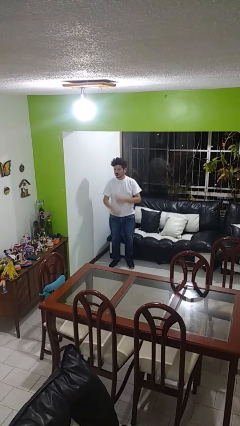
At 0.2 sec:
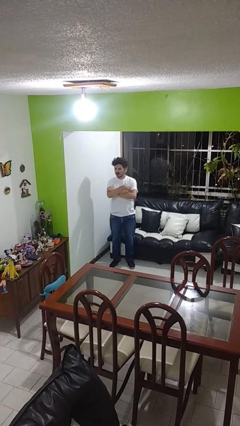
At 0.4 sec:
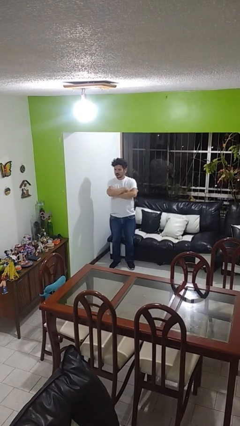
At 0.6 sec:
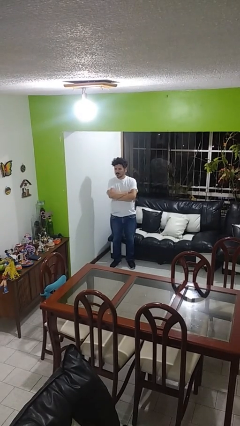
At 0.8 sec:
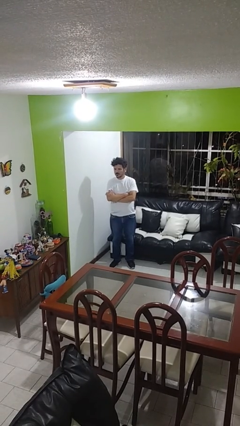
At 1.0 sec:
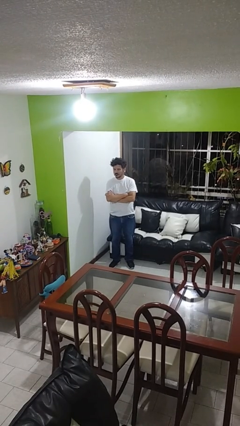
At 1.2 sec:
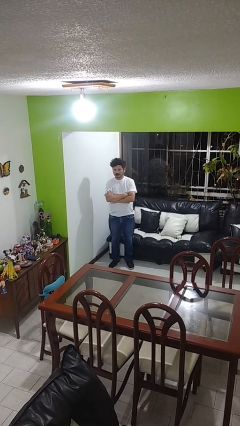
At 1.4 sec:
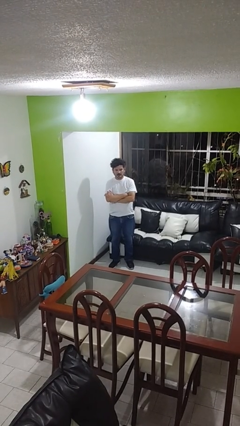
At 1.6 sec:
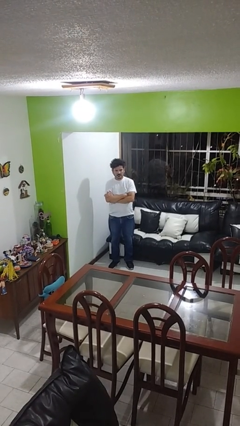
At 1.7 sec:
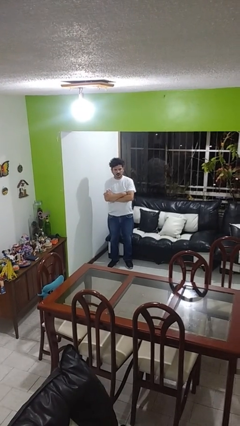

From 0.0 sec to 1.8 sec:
person crosses arms

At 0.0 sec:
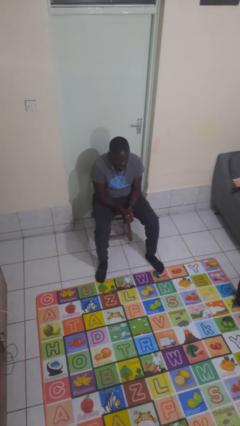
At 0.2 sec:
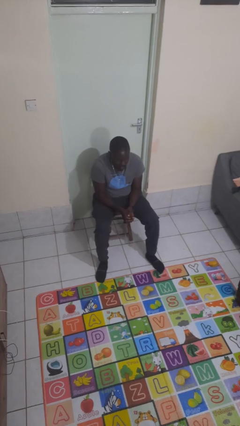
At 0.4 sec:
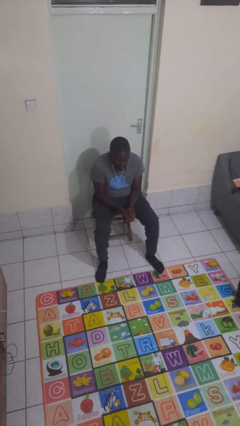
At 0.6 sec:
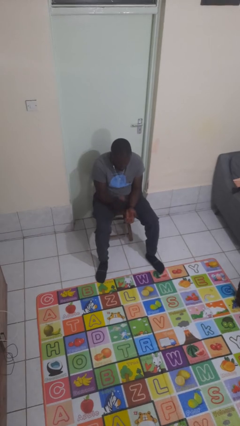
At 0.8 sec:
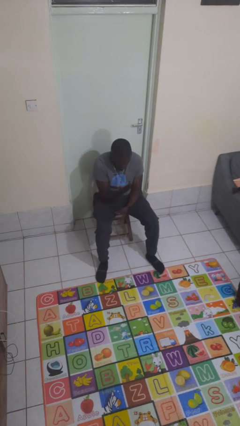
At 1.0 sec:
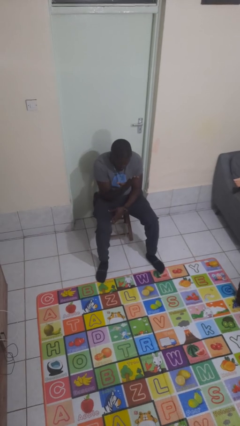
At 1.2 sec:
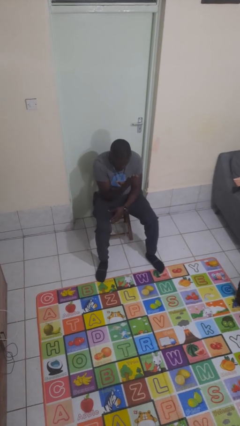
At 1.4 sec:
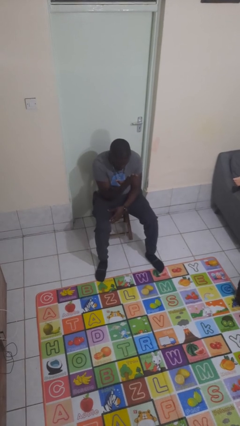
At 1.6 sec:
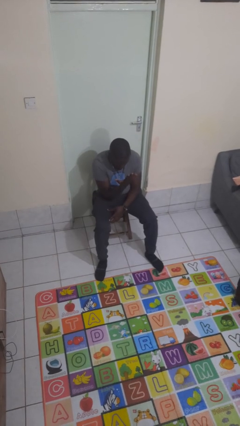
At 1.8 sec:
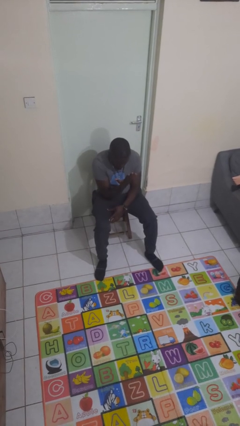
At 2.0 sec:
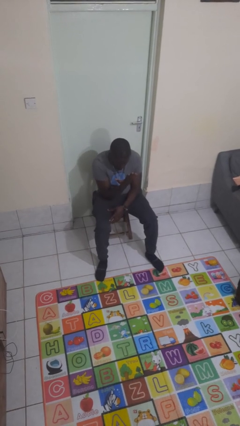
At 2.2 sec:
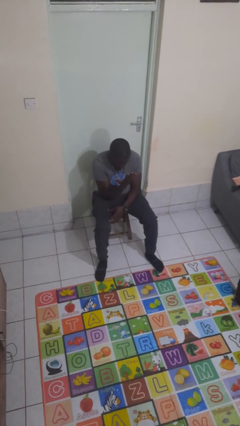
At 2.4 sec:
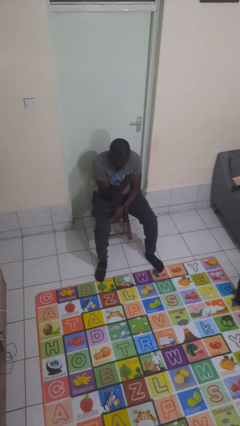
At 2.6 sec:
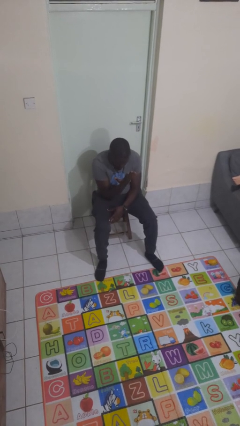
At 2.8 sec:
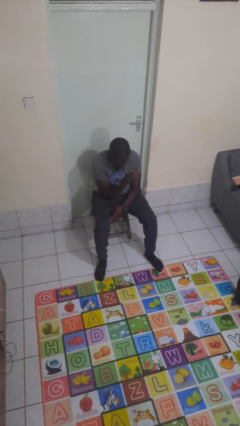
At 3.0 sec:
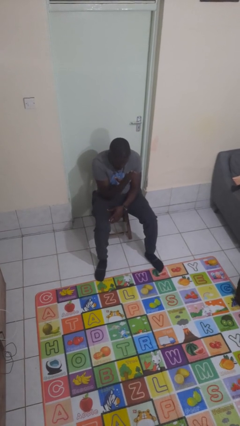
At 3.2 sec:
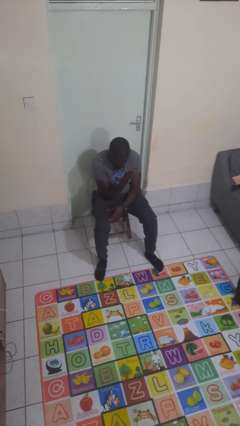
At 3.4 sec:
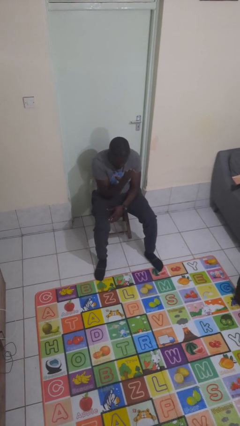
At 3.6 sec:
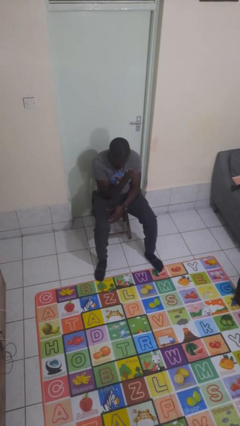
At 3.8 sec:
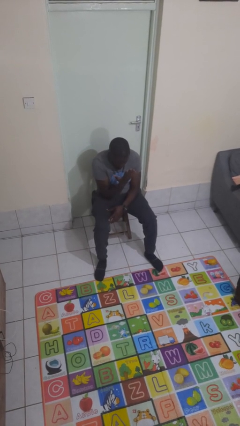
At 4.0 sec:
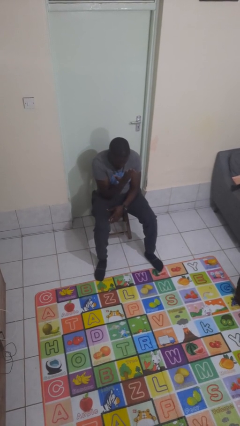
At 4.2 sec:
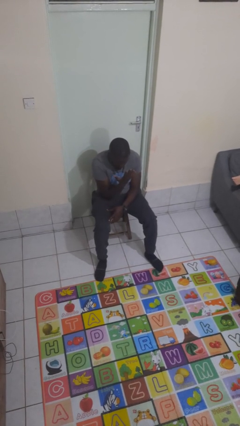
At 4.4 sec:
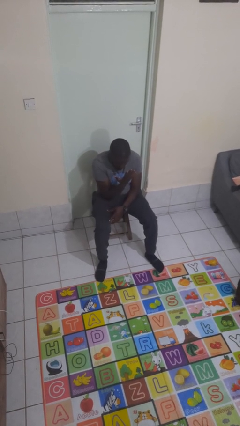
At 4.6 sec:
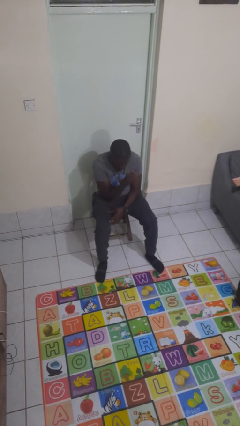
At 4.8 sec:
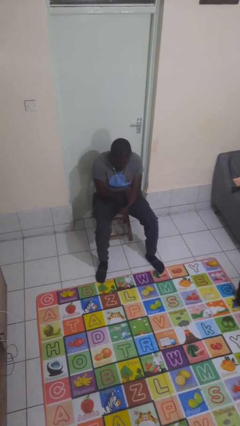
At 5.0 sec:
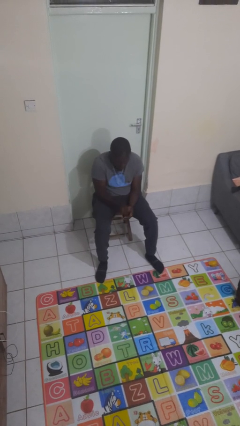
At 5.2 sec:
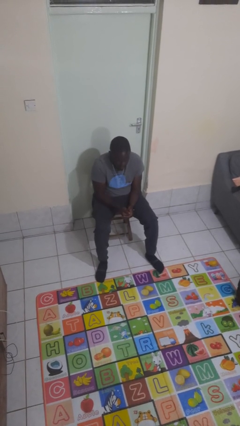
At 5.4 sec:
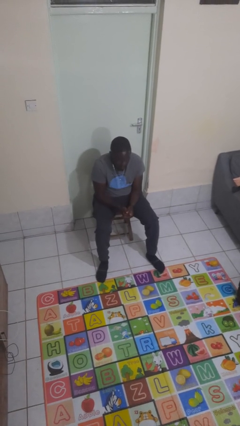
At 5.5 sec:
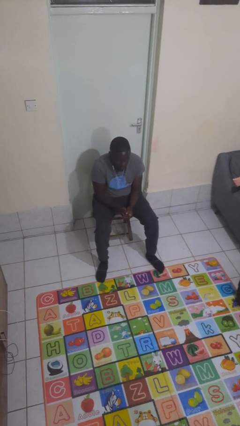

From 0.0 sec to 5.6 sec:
person looks at hands in lap

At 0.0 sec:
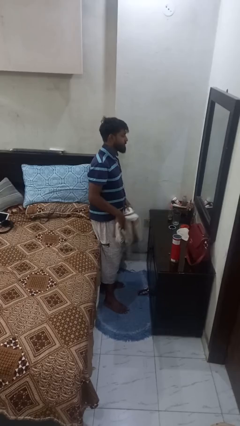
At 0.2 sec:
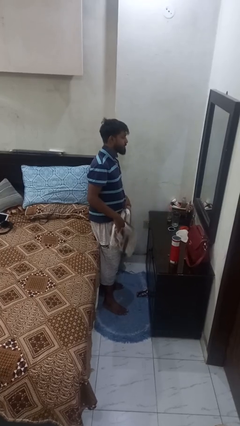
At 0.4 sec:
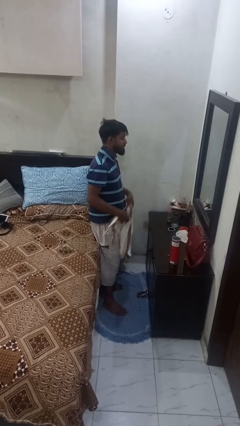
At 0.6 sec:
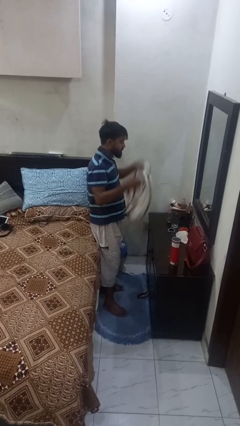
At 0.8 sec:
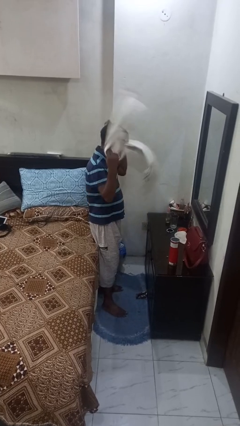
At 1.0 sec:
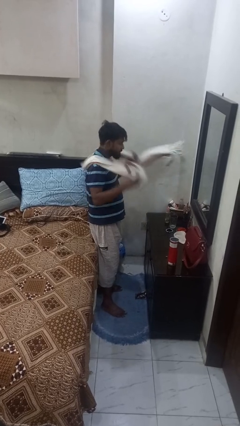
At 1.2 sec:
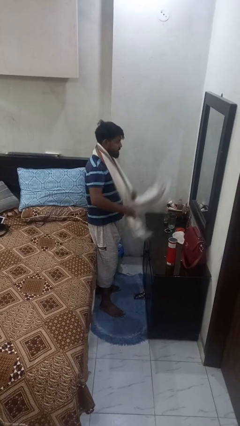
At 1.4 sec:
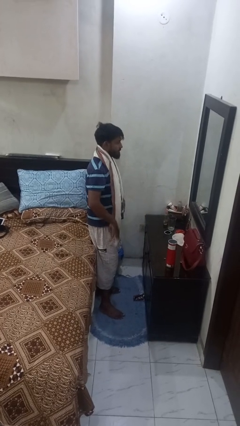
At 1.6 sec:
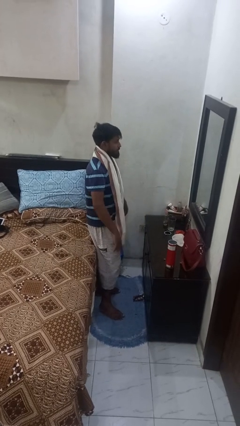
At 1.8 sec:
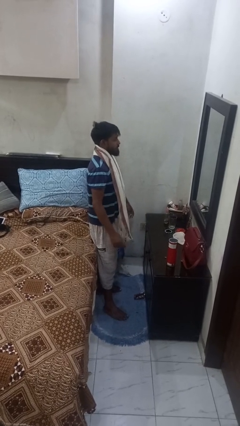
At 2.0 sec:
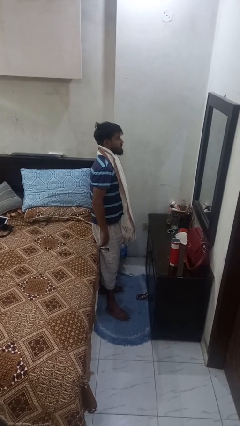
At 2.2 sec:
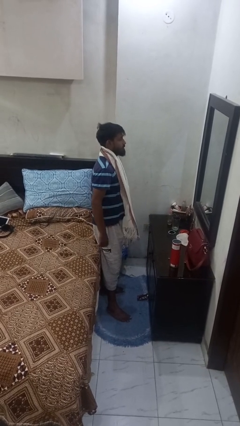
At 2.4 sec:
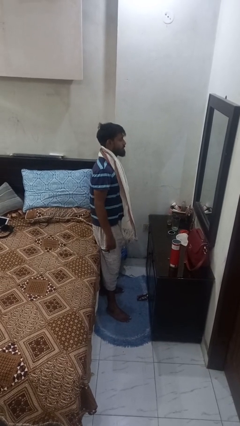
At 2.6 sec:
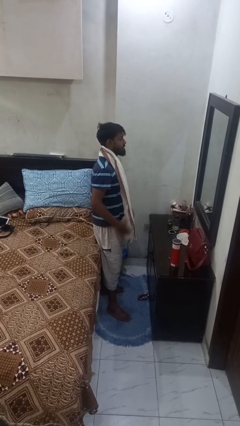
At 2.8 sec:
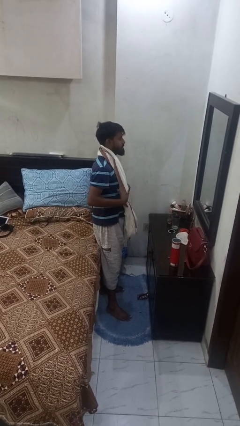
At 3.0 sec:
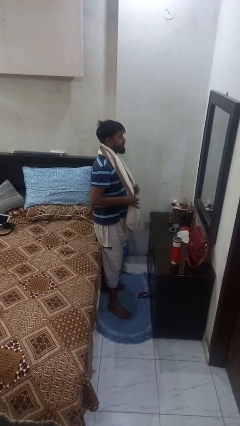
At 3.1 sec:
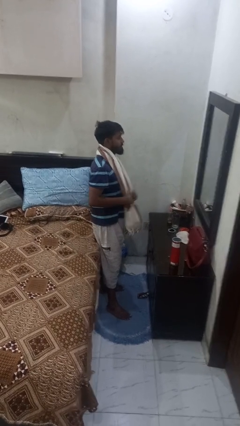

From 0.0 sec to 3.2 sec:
person puts on scarf

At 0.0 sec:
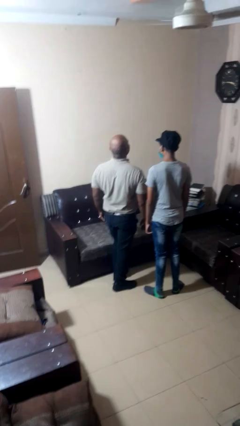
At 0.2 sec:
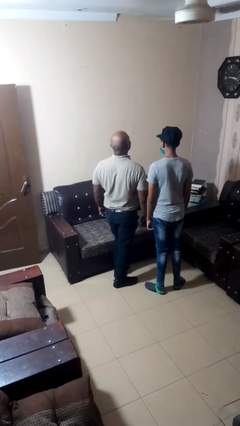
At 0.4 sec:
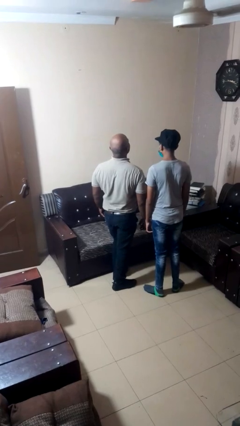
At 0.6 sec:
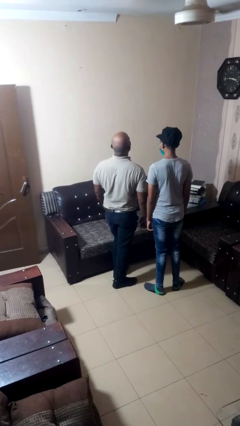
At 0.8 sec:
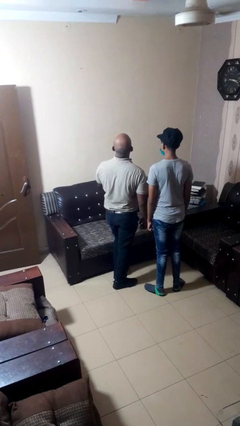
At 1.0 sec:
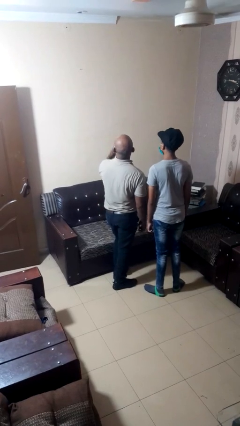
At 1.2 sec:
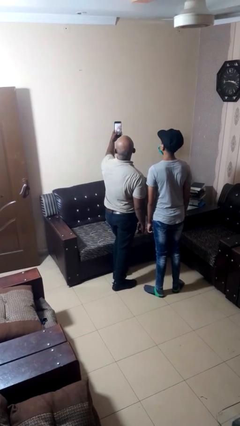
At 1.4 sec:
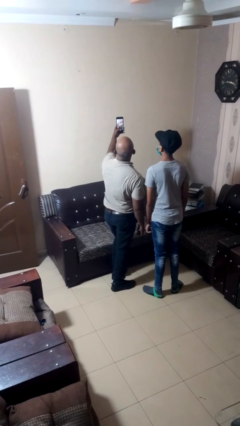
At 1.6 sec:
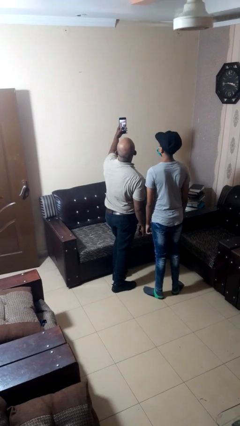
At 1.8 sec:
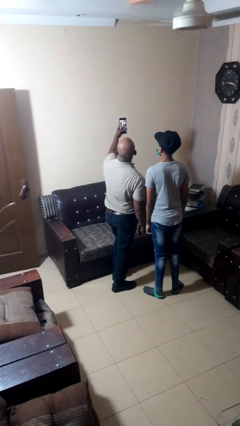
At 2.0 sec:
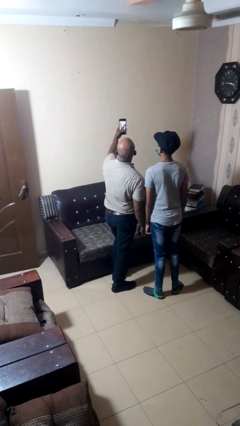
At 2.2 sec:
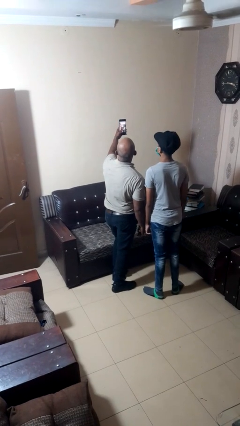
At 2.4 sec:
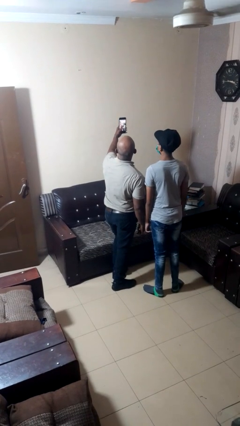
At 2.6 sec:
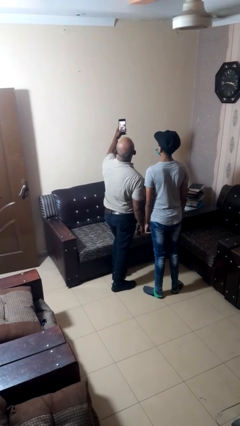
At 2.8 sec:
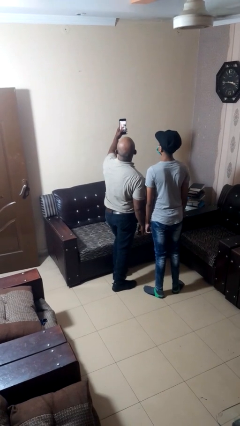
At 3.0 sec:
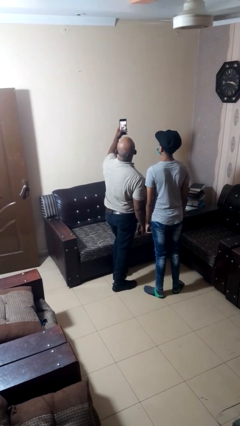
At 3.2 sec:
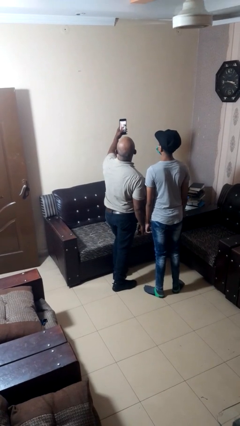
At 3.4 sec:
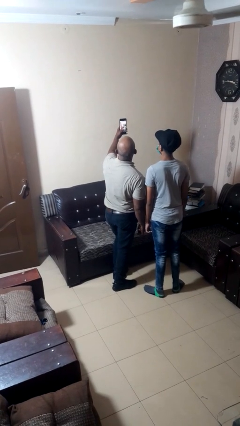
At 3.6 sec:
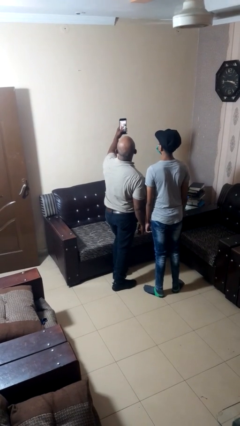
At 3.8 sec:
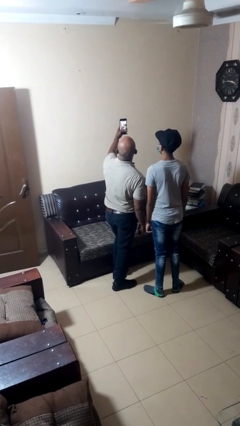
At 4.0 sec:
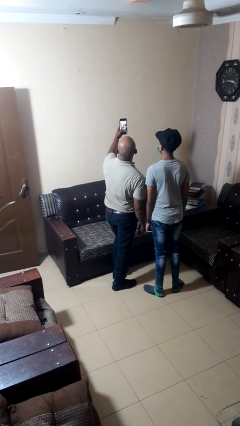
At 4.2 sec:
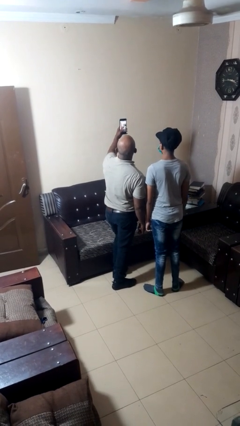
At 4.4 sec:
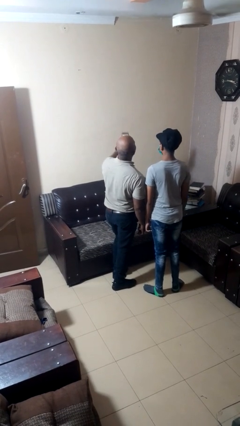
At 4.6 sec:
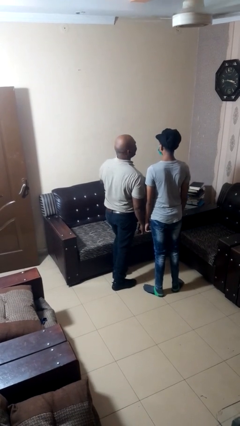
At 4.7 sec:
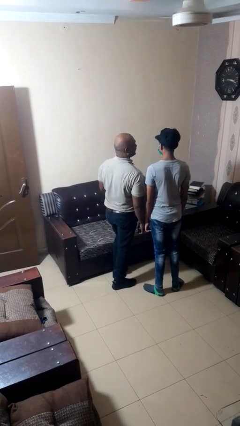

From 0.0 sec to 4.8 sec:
person takes selfie with person

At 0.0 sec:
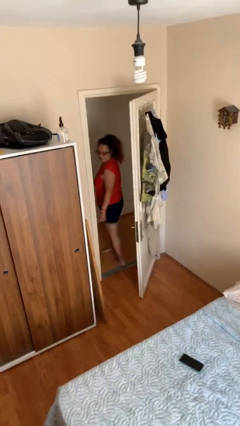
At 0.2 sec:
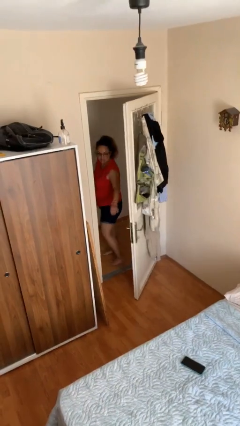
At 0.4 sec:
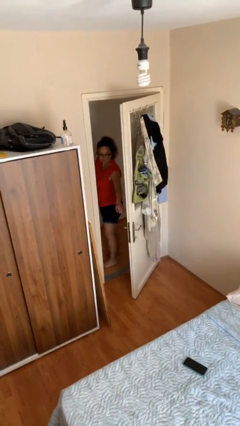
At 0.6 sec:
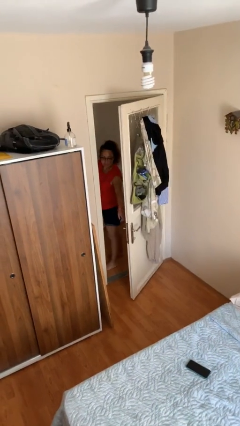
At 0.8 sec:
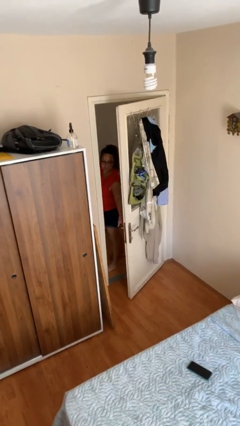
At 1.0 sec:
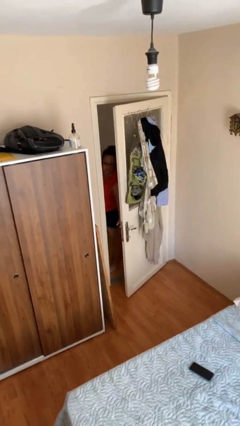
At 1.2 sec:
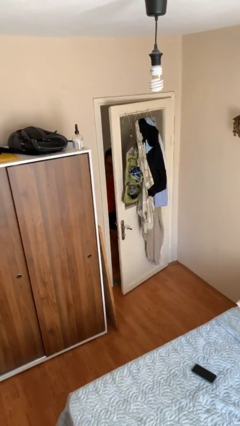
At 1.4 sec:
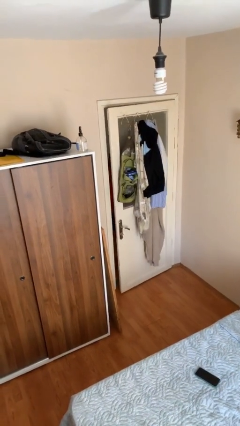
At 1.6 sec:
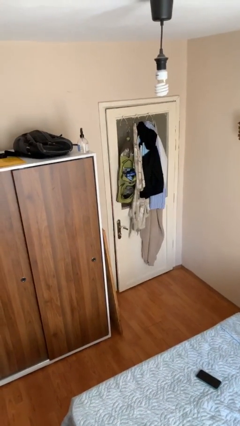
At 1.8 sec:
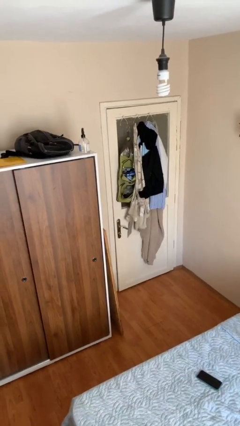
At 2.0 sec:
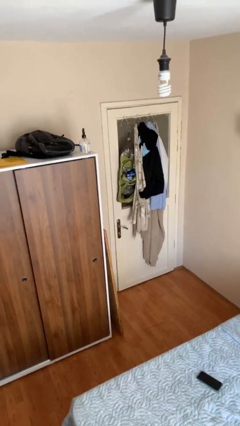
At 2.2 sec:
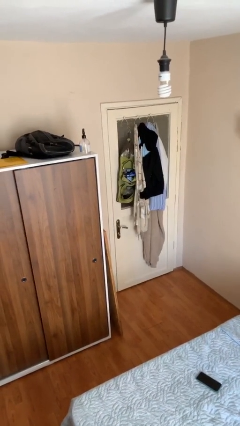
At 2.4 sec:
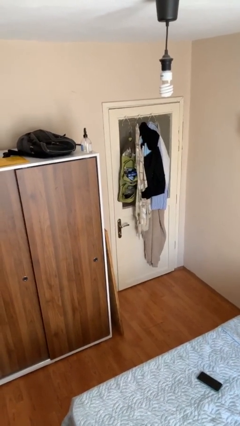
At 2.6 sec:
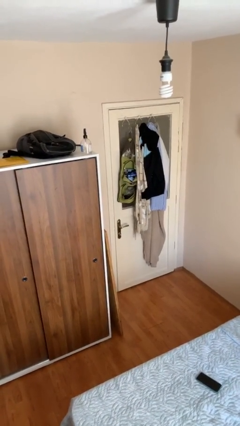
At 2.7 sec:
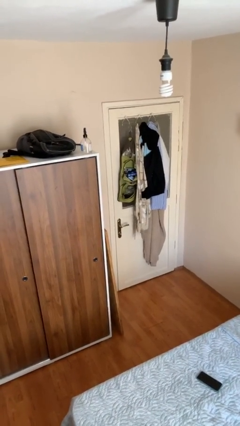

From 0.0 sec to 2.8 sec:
person closes facility door
